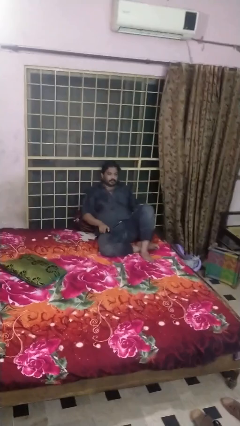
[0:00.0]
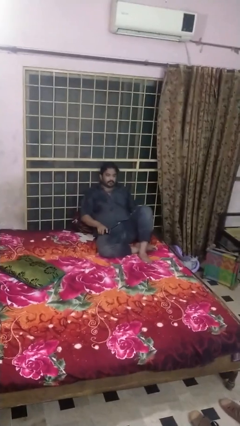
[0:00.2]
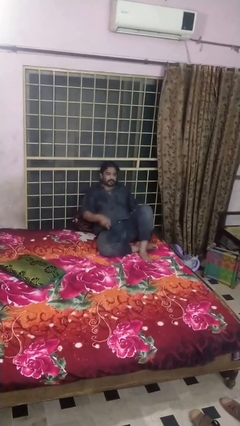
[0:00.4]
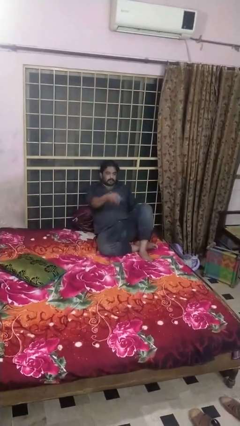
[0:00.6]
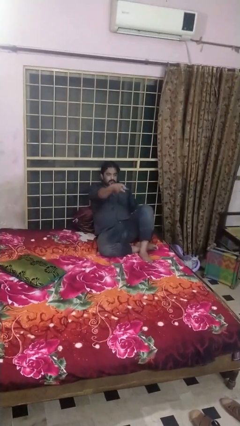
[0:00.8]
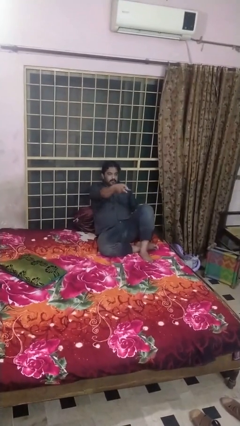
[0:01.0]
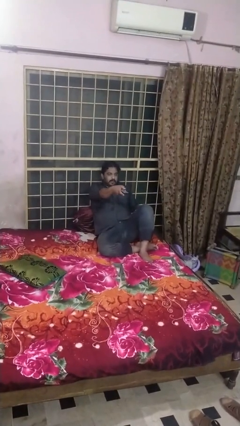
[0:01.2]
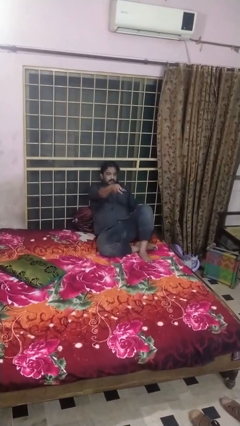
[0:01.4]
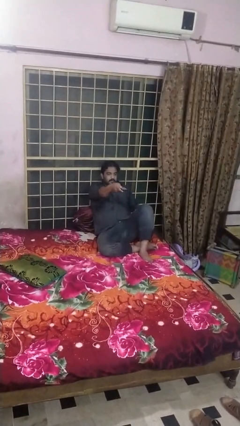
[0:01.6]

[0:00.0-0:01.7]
person uses television remote

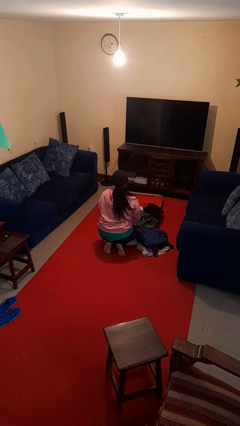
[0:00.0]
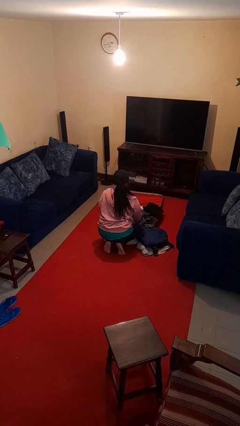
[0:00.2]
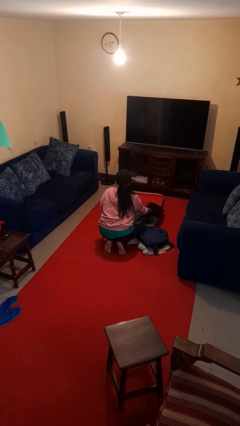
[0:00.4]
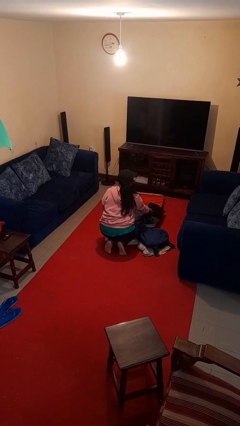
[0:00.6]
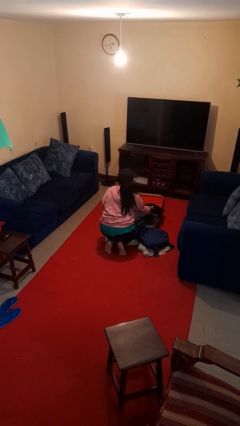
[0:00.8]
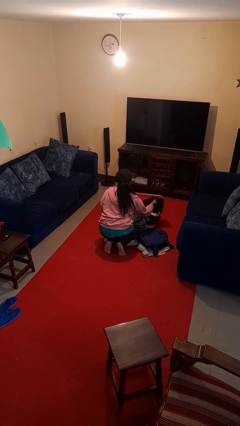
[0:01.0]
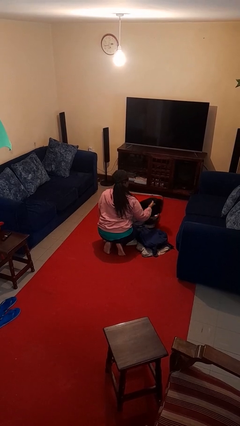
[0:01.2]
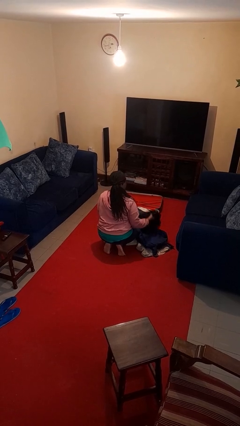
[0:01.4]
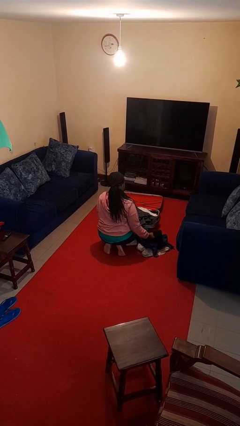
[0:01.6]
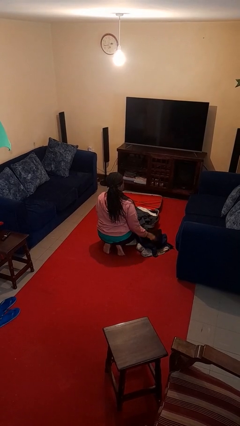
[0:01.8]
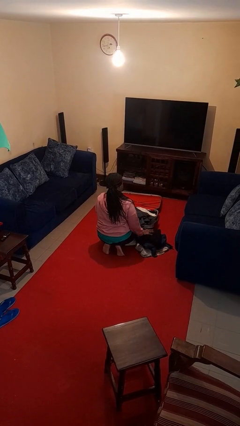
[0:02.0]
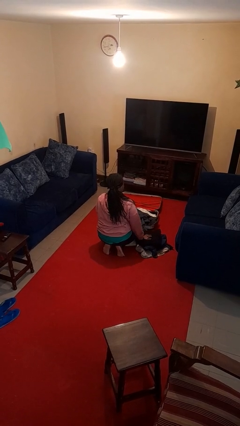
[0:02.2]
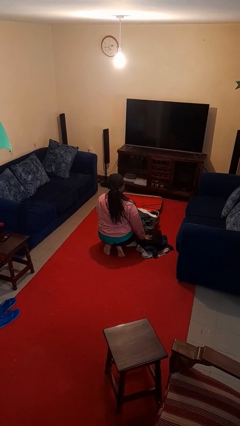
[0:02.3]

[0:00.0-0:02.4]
person unloads clothes from suitcase

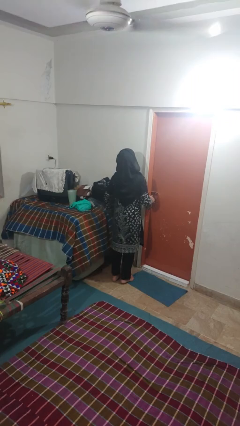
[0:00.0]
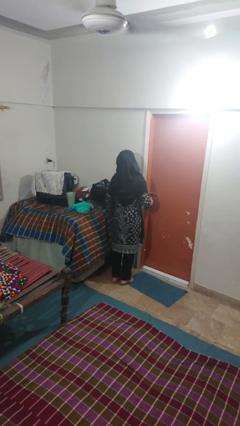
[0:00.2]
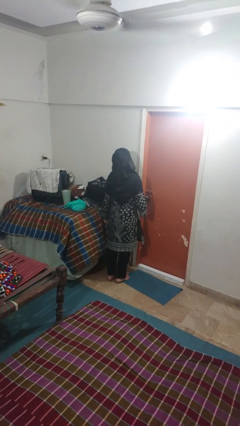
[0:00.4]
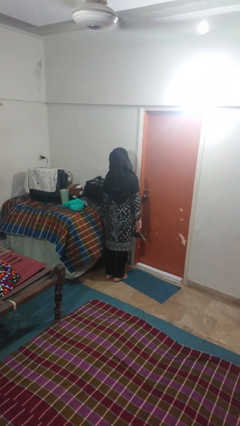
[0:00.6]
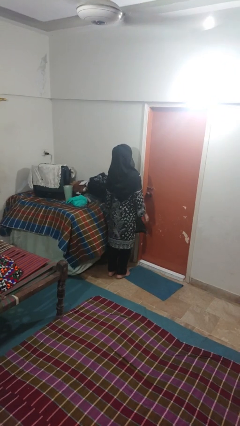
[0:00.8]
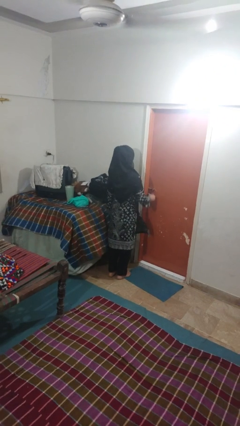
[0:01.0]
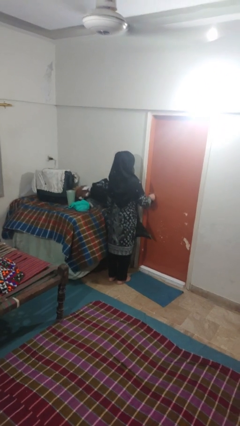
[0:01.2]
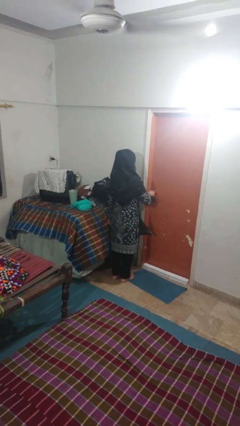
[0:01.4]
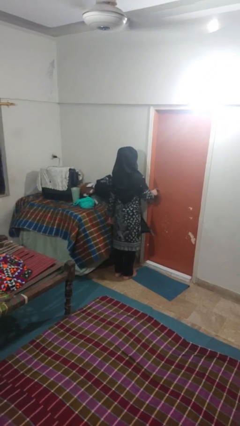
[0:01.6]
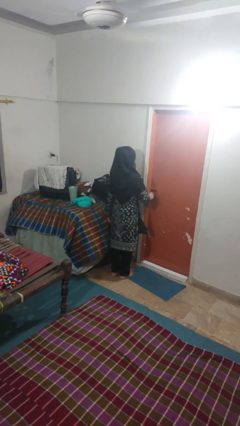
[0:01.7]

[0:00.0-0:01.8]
person locks door with keys

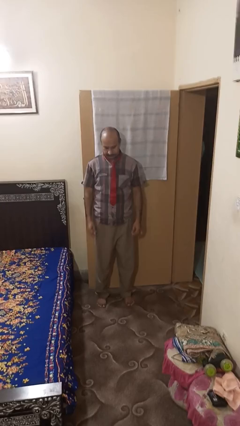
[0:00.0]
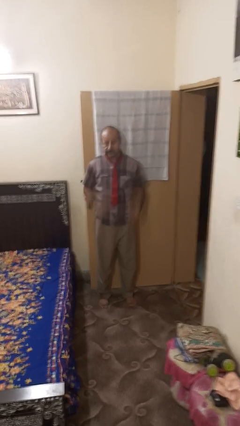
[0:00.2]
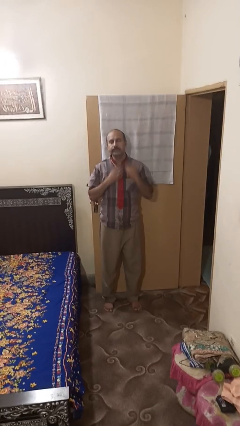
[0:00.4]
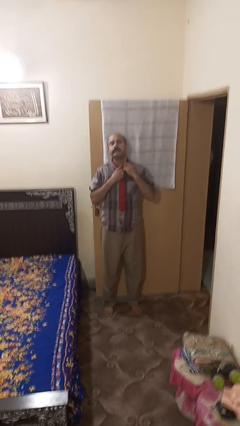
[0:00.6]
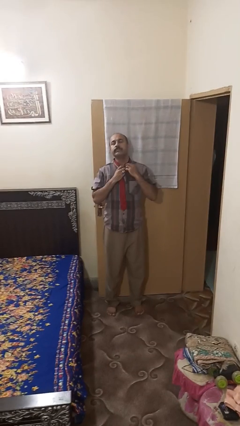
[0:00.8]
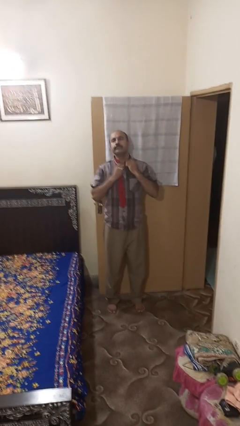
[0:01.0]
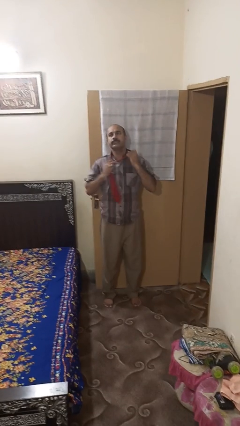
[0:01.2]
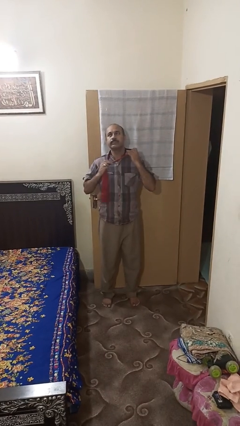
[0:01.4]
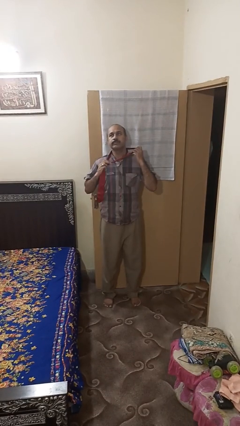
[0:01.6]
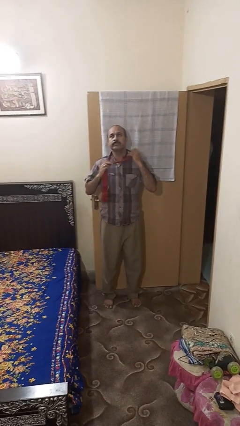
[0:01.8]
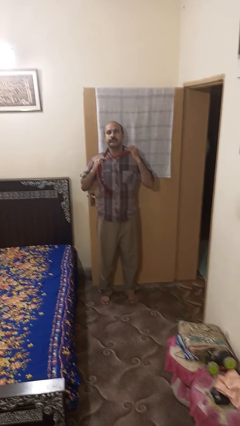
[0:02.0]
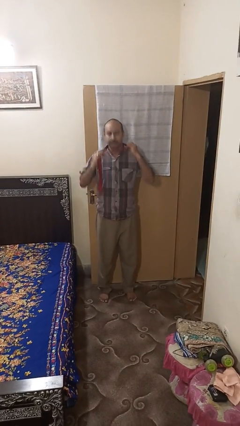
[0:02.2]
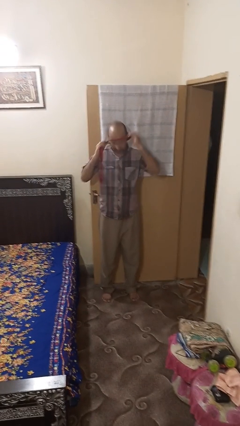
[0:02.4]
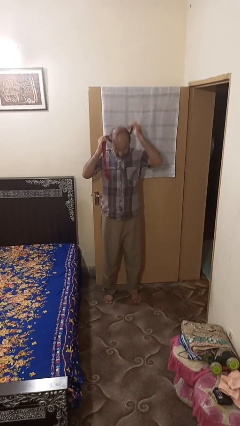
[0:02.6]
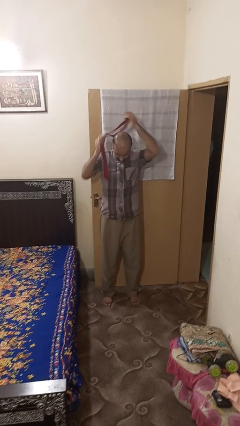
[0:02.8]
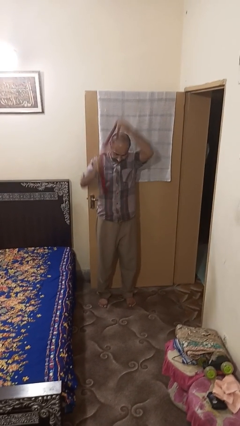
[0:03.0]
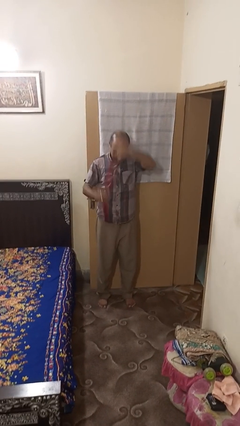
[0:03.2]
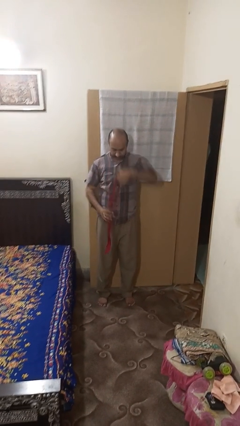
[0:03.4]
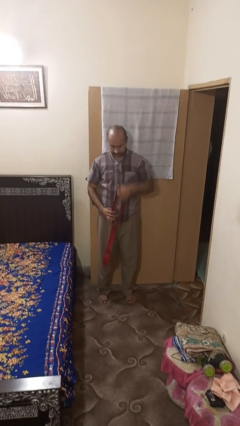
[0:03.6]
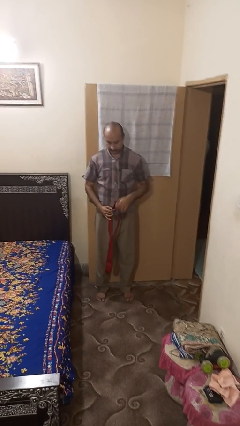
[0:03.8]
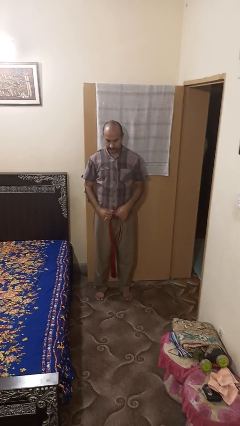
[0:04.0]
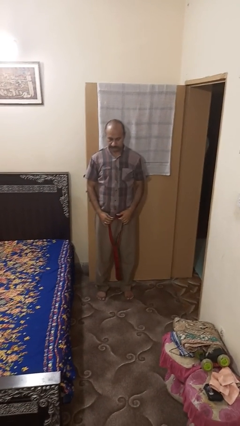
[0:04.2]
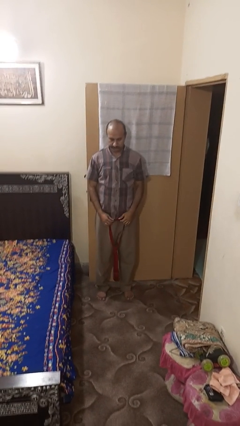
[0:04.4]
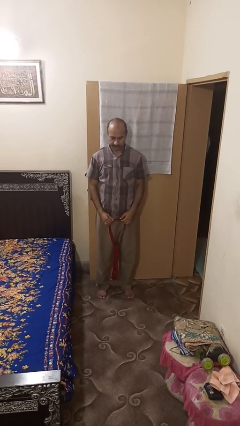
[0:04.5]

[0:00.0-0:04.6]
person takes off necktie

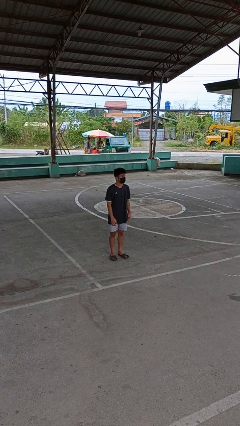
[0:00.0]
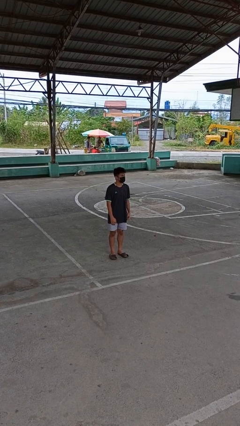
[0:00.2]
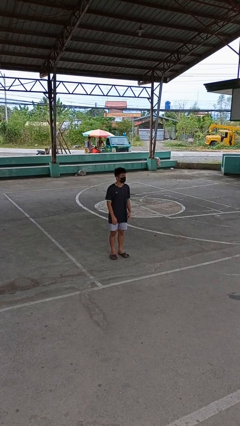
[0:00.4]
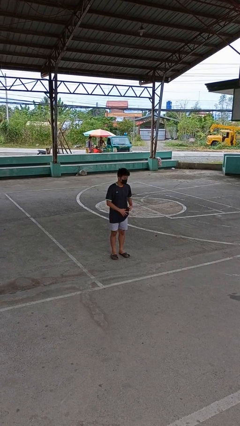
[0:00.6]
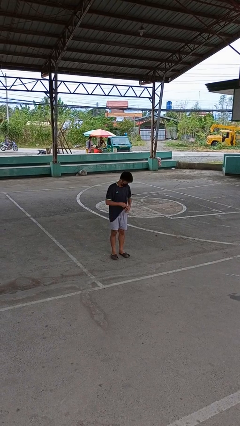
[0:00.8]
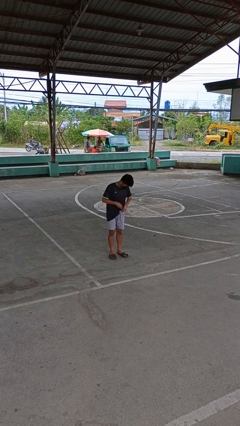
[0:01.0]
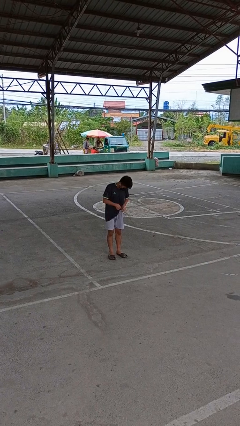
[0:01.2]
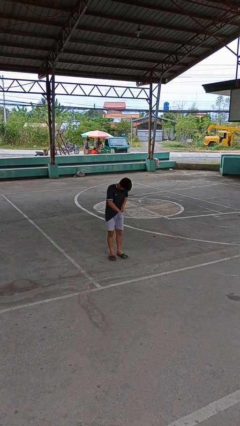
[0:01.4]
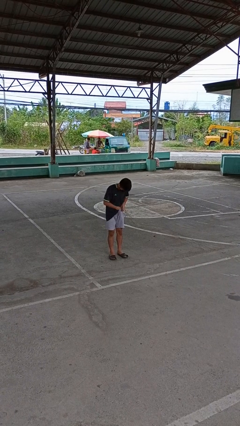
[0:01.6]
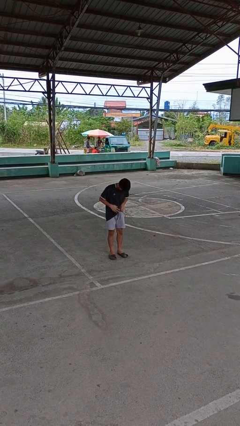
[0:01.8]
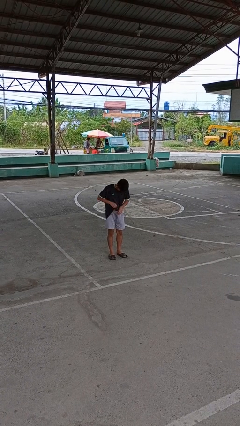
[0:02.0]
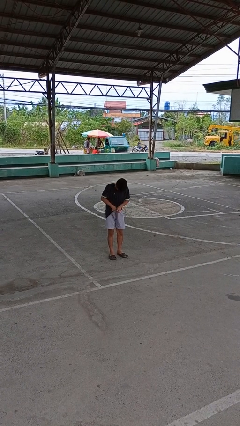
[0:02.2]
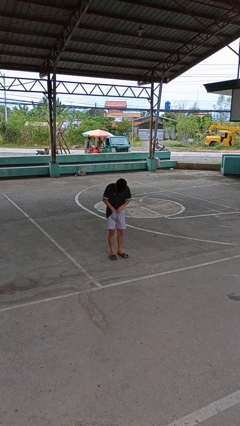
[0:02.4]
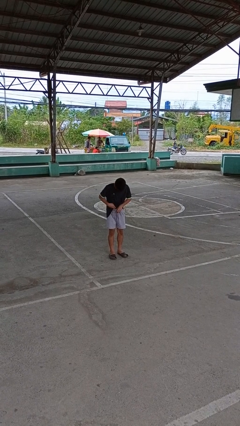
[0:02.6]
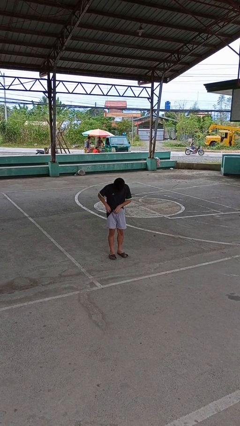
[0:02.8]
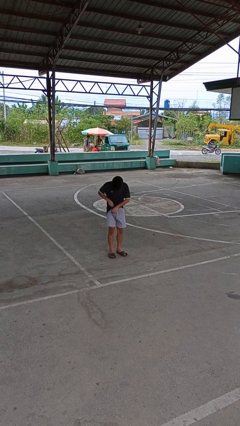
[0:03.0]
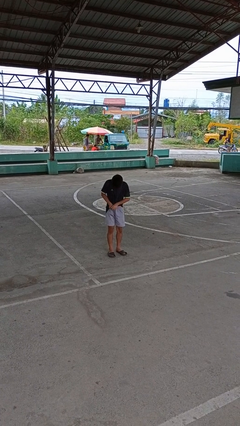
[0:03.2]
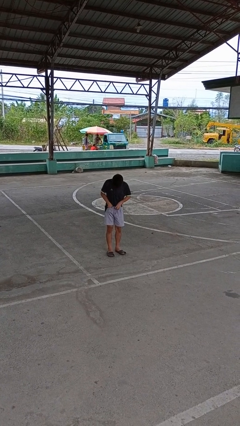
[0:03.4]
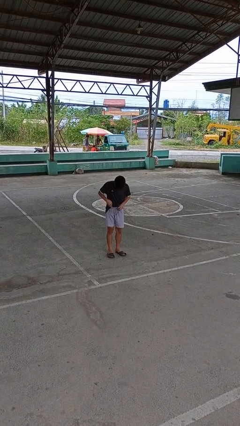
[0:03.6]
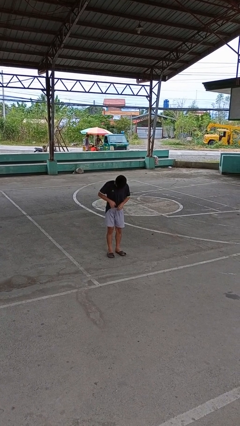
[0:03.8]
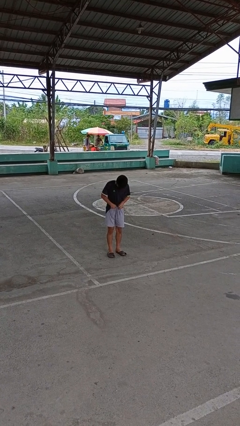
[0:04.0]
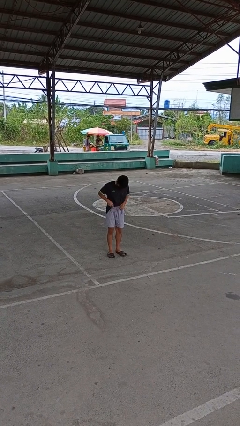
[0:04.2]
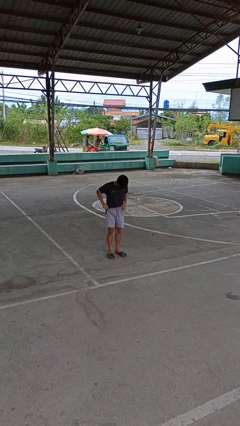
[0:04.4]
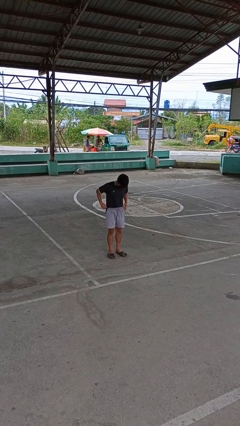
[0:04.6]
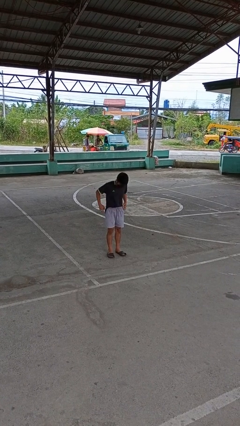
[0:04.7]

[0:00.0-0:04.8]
person tucks in shirt

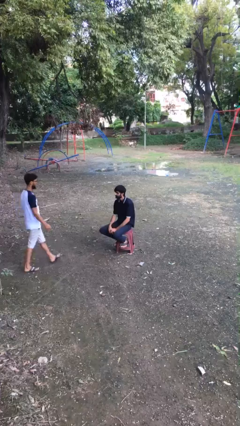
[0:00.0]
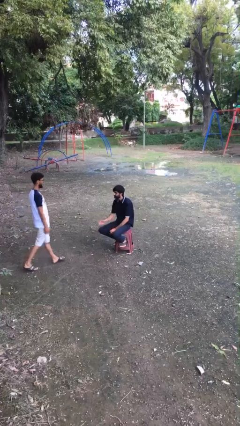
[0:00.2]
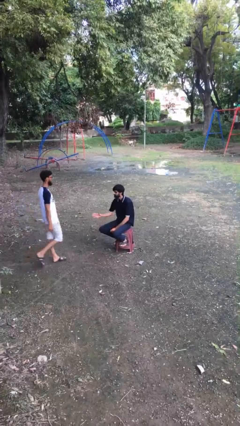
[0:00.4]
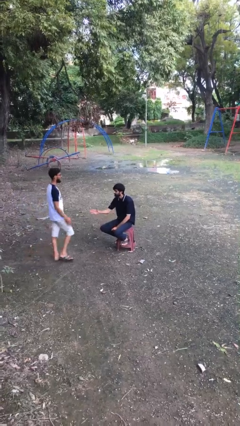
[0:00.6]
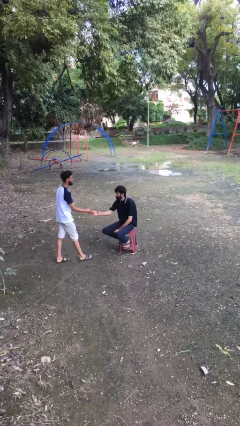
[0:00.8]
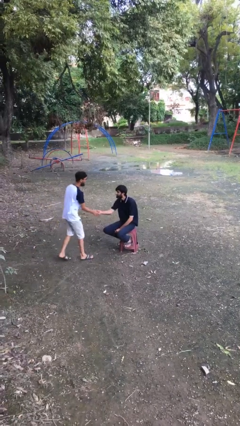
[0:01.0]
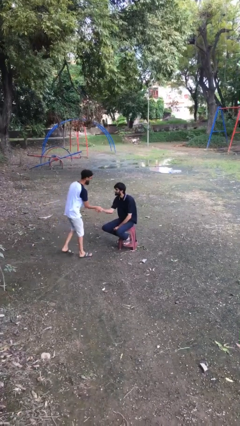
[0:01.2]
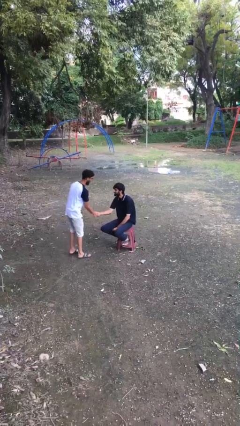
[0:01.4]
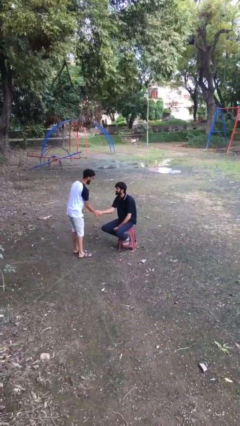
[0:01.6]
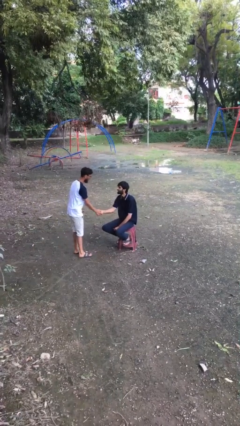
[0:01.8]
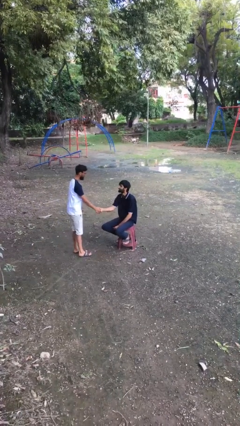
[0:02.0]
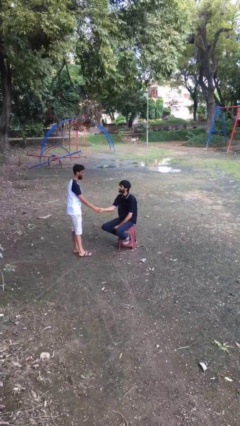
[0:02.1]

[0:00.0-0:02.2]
person shakes hand
